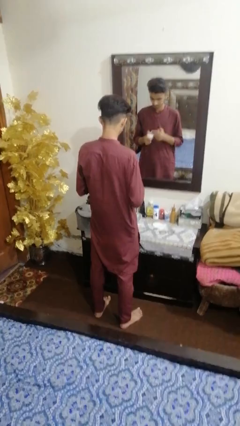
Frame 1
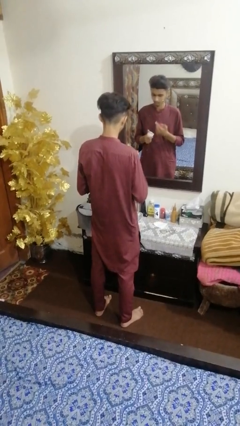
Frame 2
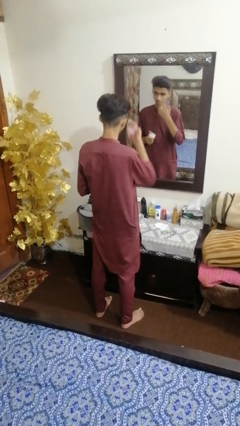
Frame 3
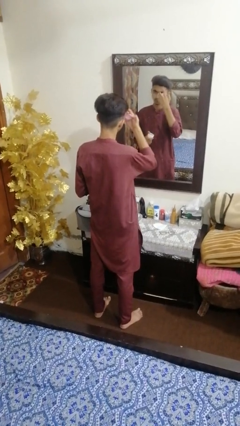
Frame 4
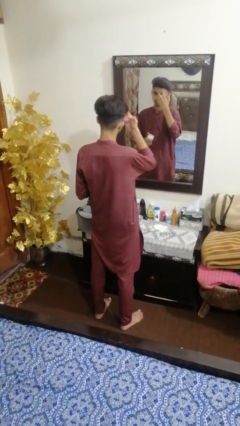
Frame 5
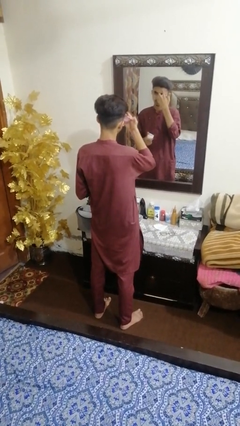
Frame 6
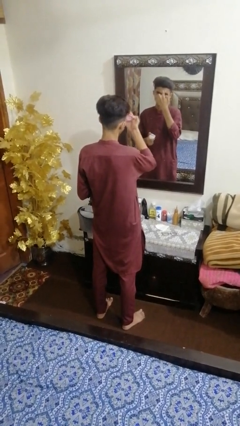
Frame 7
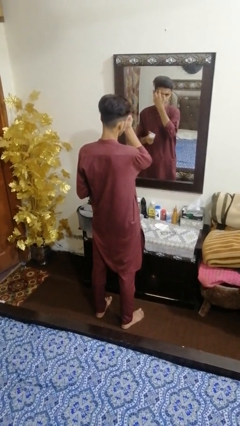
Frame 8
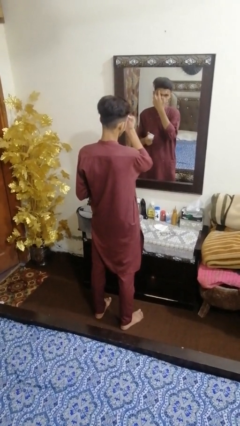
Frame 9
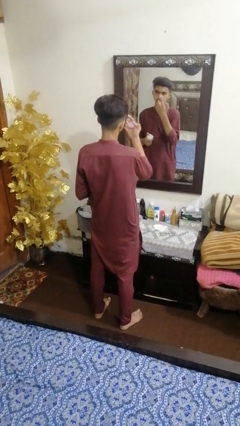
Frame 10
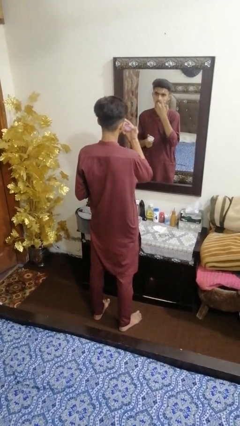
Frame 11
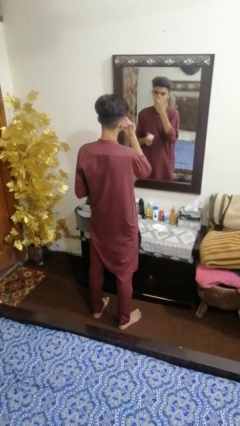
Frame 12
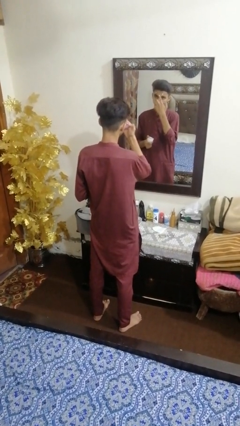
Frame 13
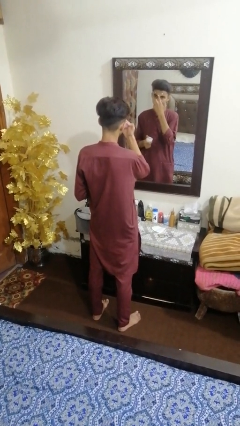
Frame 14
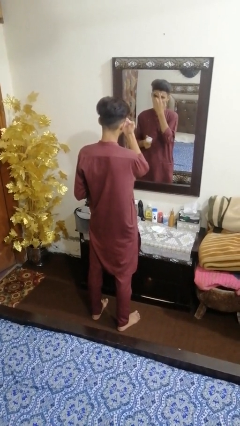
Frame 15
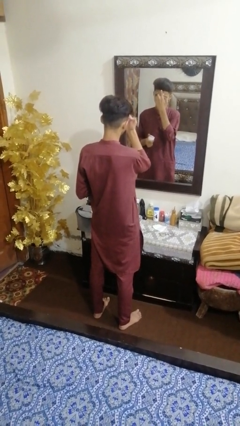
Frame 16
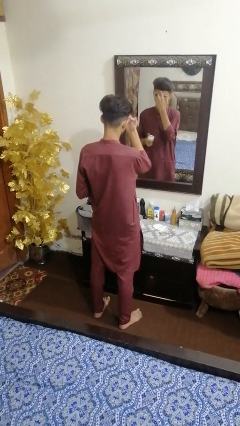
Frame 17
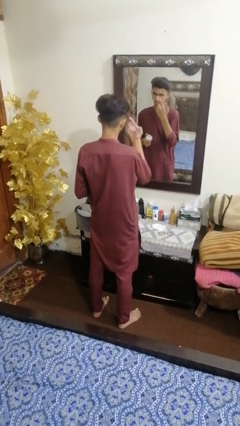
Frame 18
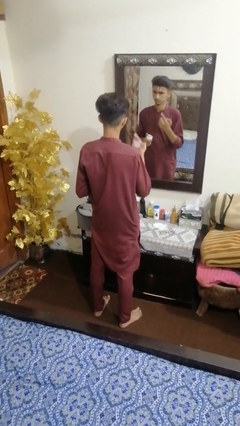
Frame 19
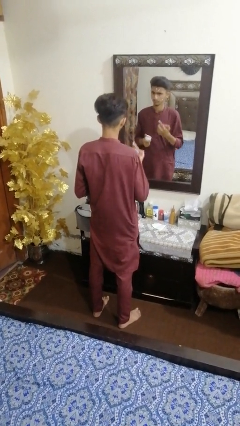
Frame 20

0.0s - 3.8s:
person applies foundation makeup

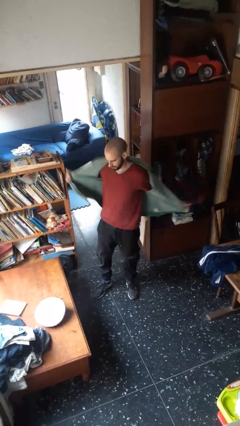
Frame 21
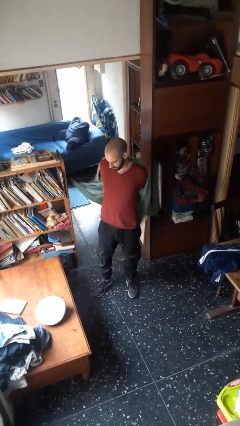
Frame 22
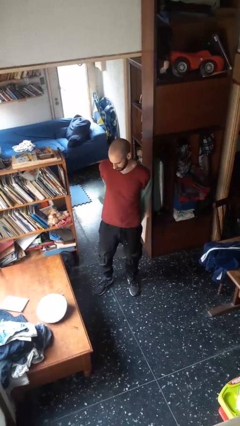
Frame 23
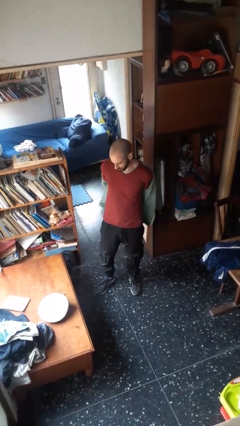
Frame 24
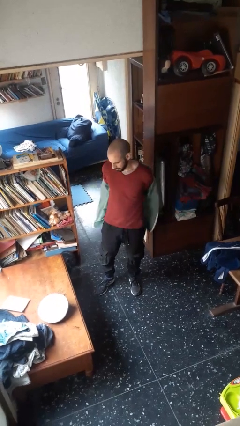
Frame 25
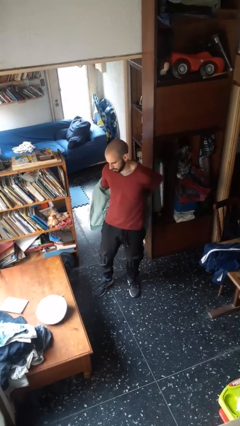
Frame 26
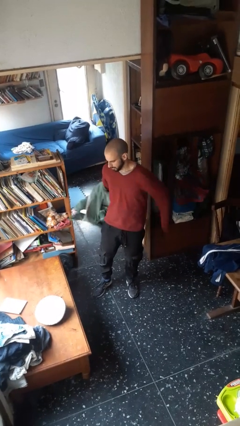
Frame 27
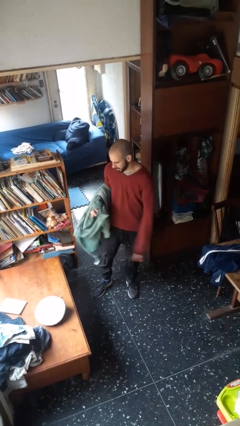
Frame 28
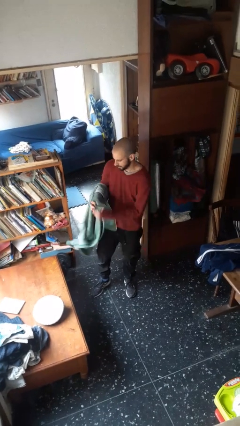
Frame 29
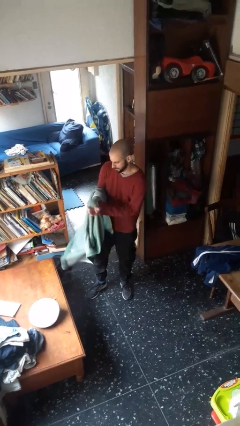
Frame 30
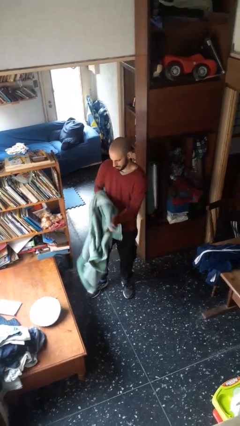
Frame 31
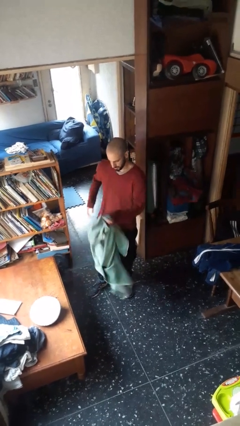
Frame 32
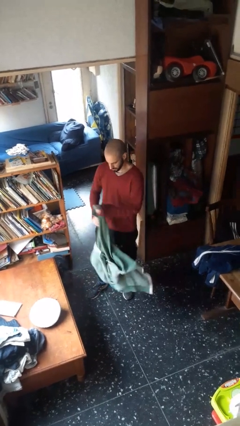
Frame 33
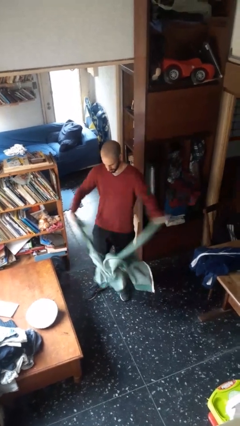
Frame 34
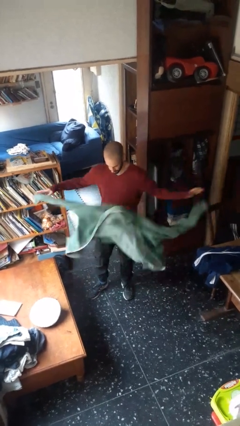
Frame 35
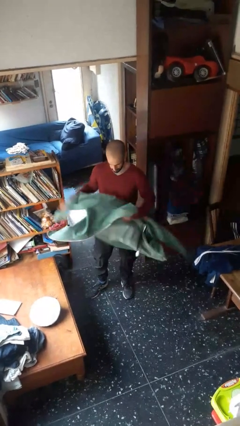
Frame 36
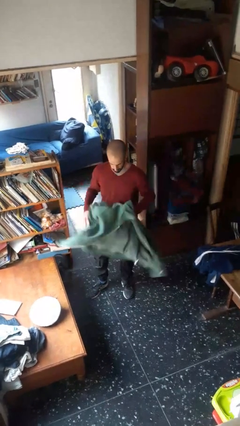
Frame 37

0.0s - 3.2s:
person takes off jacket

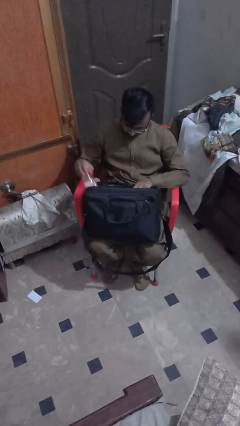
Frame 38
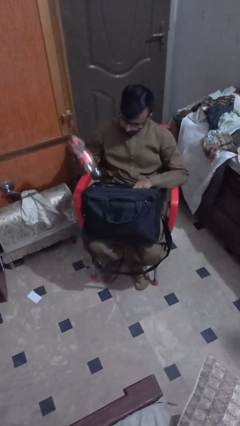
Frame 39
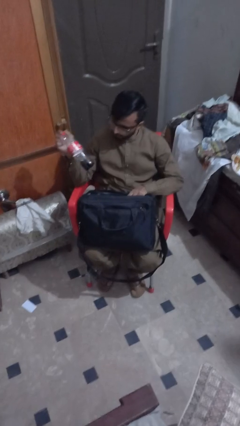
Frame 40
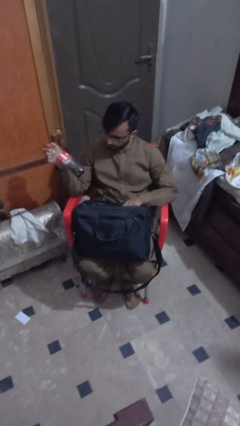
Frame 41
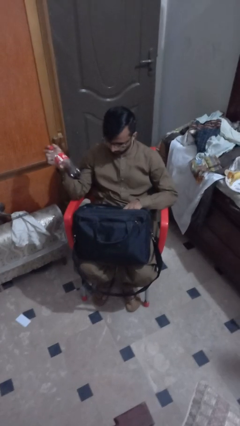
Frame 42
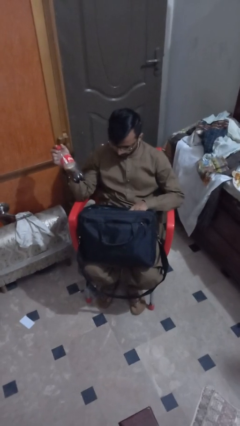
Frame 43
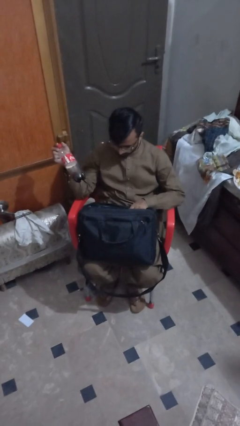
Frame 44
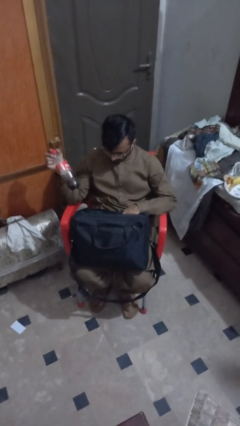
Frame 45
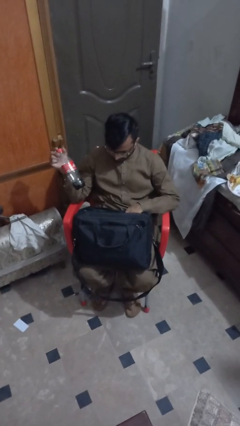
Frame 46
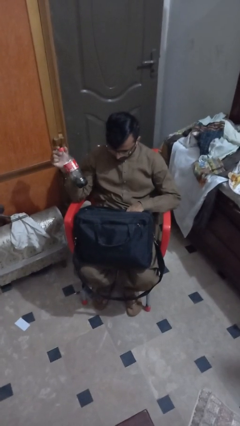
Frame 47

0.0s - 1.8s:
person takes object from bag

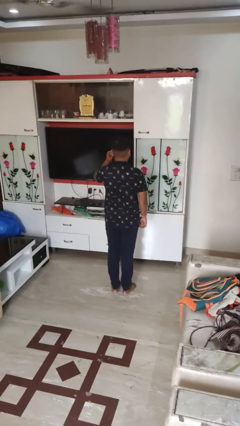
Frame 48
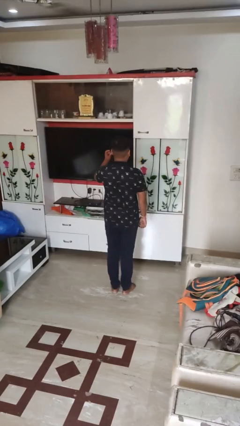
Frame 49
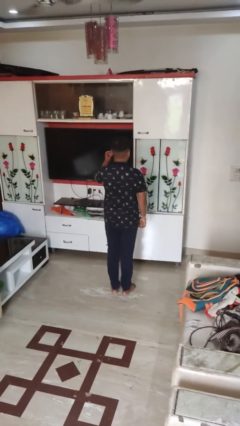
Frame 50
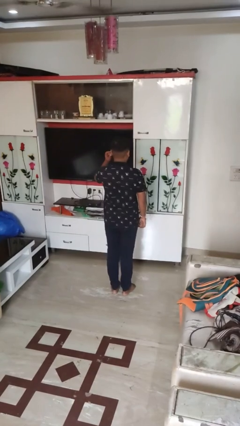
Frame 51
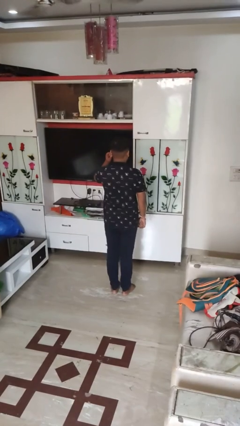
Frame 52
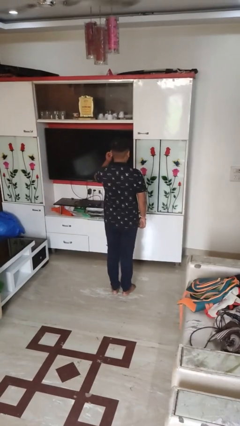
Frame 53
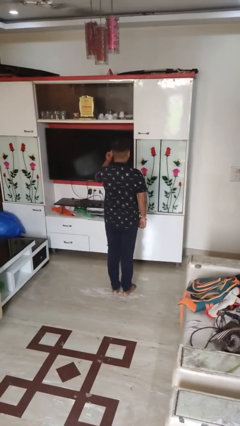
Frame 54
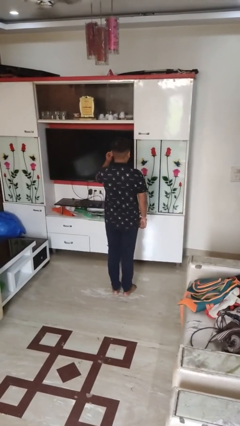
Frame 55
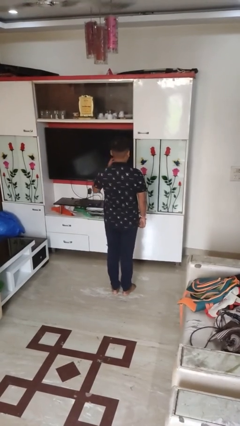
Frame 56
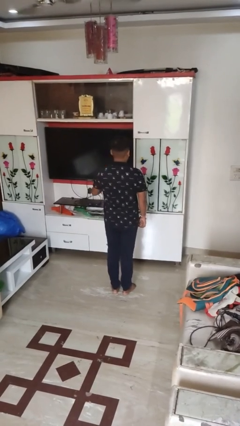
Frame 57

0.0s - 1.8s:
person gestures listen closely

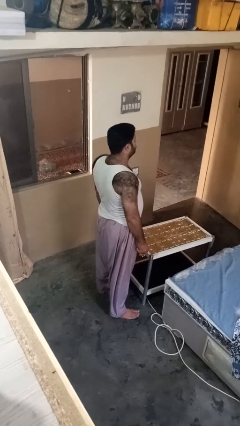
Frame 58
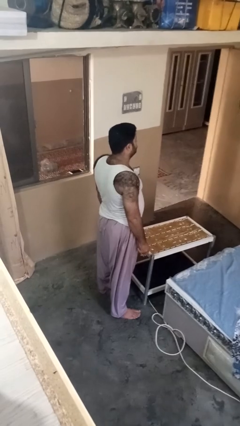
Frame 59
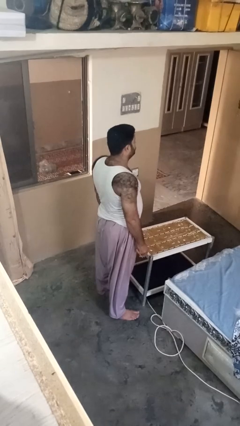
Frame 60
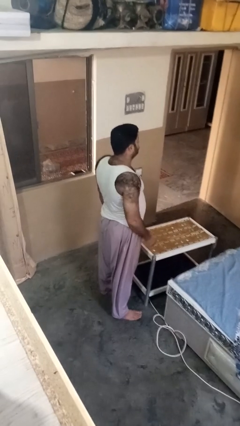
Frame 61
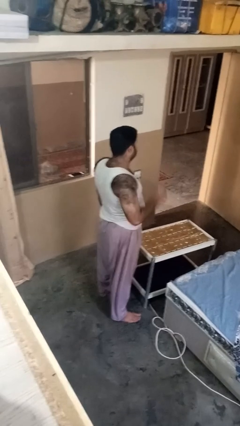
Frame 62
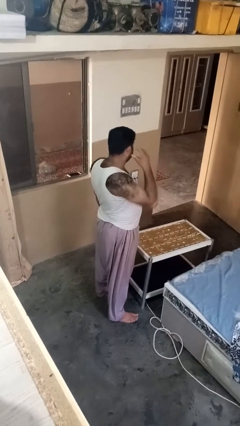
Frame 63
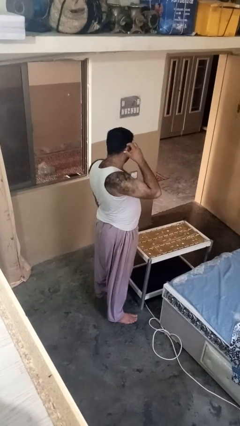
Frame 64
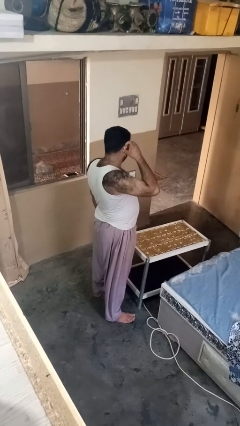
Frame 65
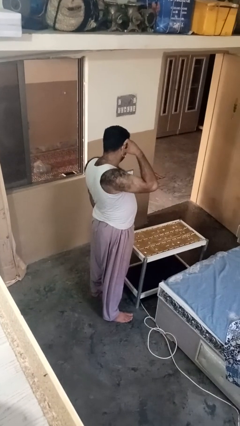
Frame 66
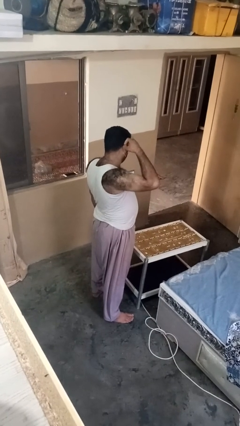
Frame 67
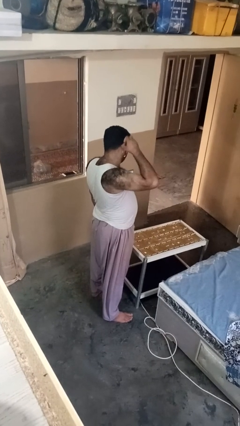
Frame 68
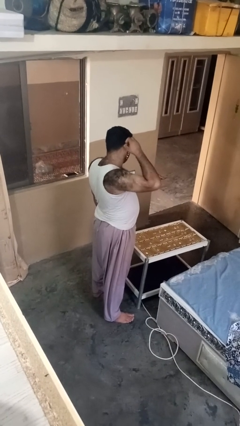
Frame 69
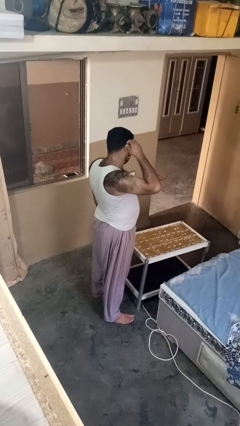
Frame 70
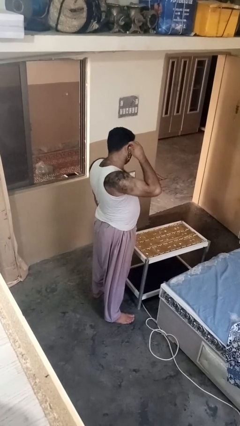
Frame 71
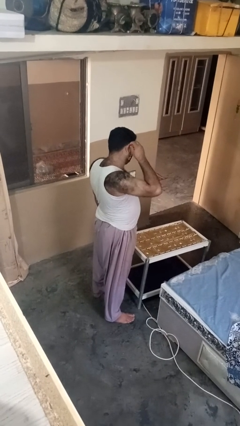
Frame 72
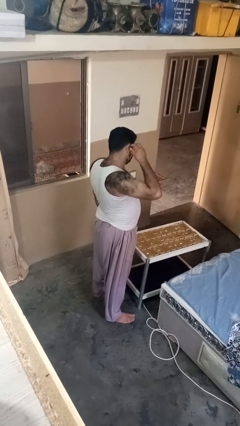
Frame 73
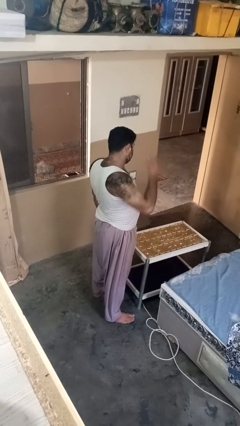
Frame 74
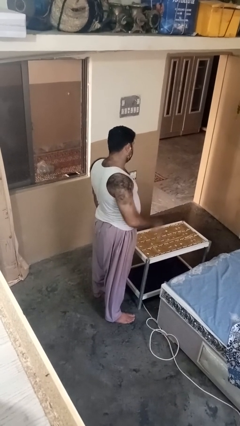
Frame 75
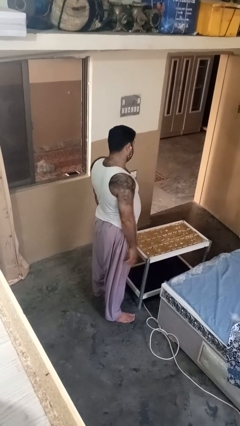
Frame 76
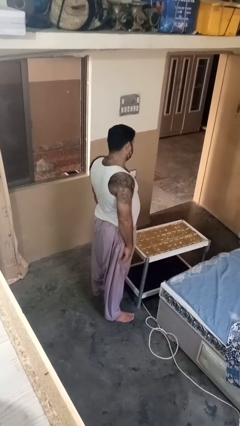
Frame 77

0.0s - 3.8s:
person puts on earrings

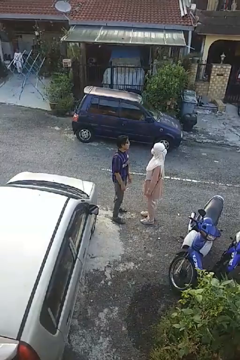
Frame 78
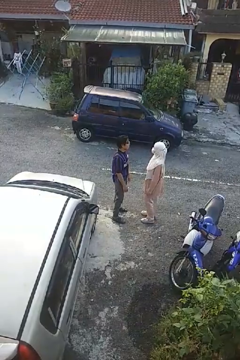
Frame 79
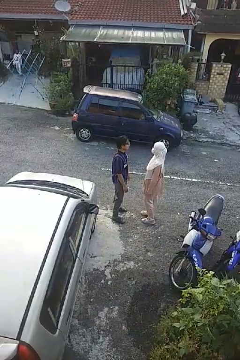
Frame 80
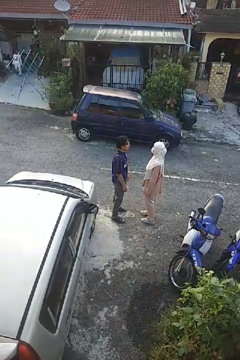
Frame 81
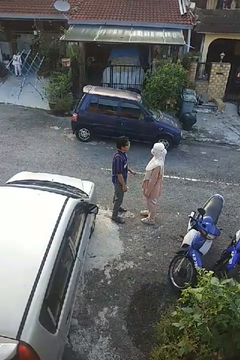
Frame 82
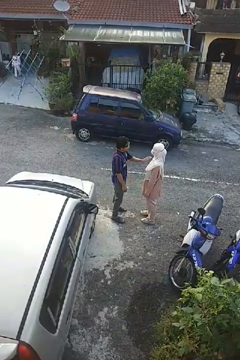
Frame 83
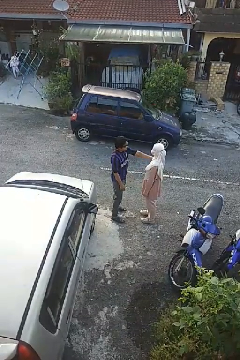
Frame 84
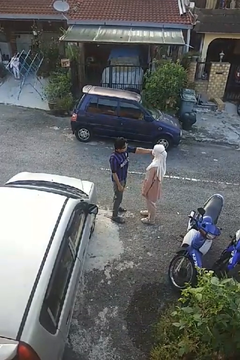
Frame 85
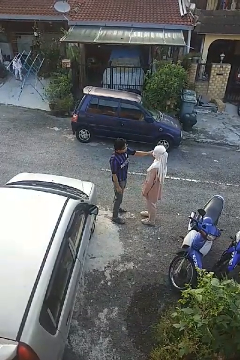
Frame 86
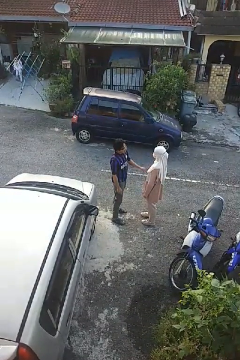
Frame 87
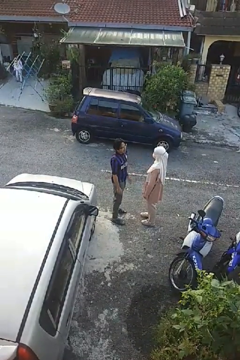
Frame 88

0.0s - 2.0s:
person shoves person

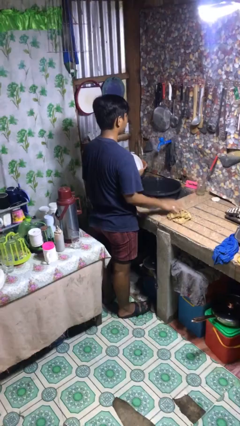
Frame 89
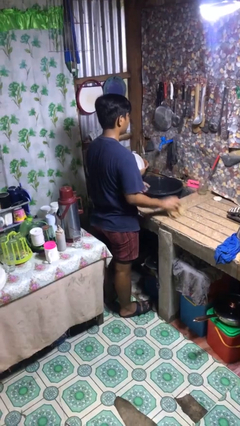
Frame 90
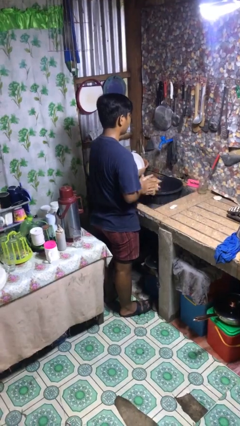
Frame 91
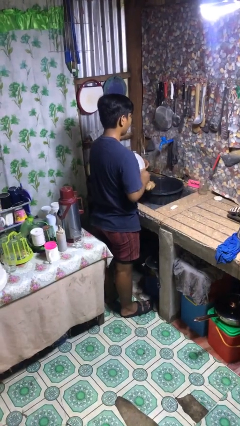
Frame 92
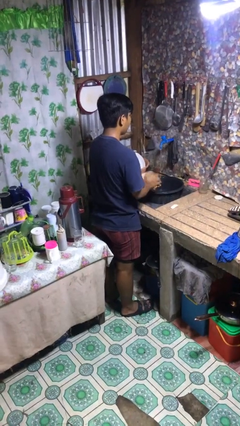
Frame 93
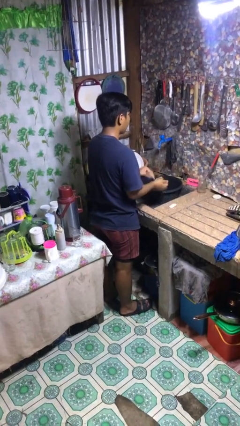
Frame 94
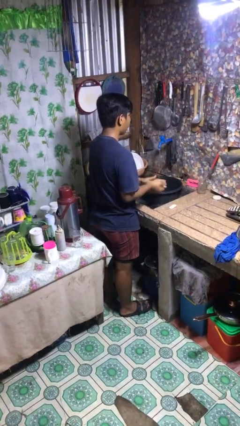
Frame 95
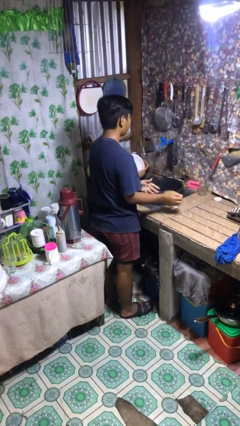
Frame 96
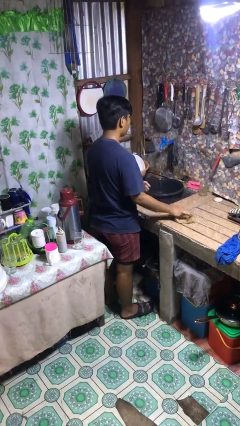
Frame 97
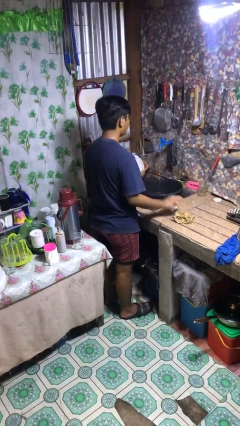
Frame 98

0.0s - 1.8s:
person dries hands with towel
